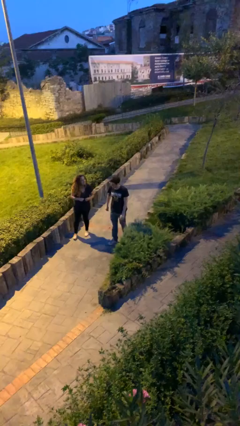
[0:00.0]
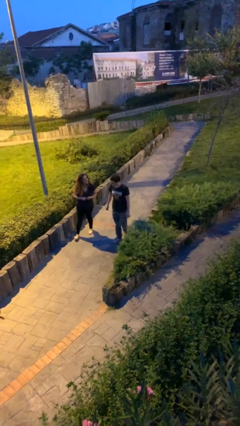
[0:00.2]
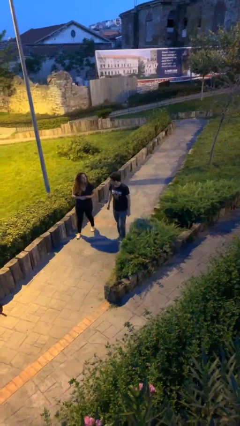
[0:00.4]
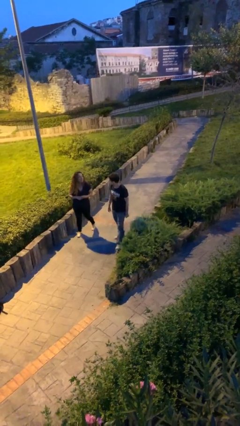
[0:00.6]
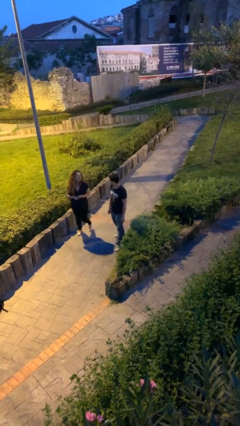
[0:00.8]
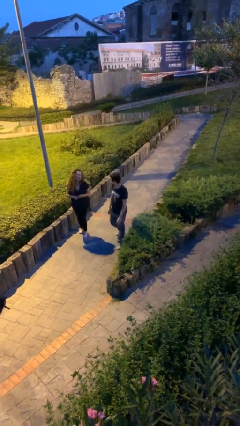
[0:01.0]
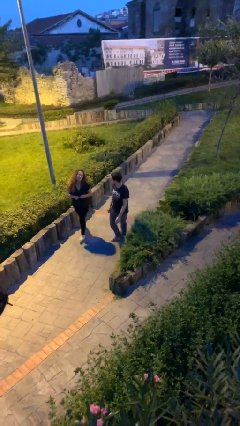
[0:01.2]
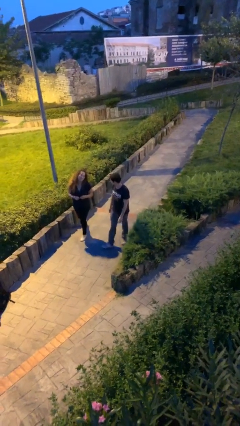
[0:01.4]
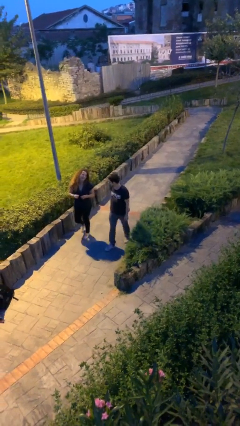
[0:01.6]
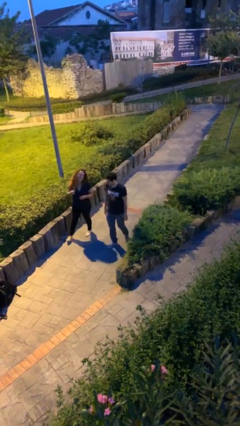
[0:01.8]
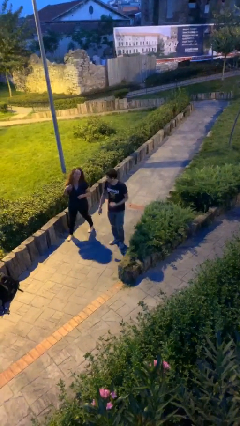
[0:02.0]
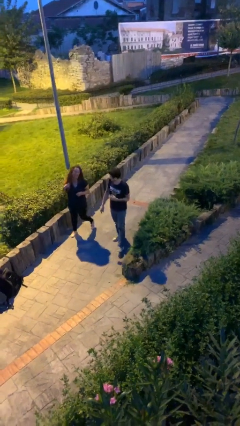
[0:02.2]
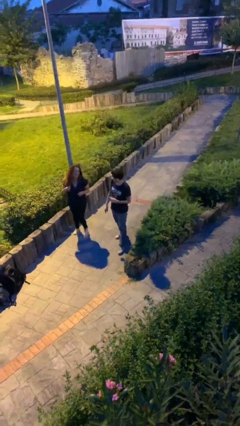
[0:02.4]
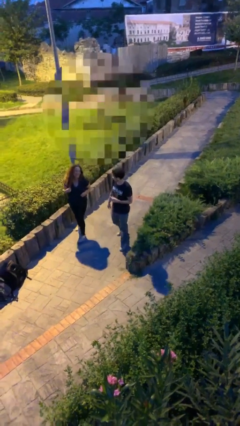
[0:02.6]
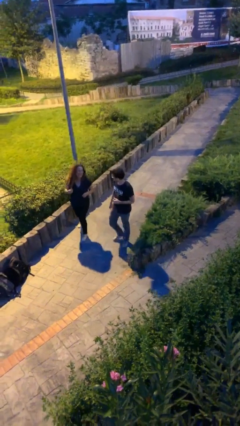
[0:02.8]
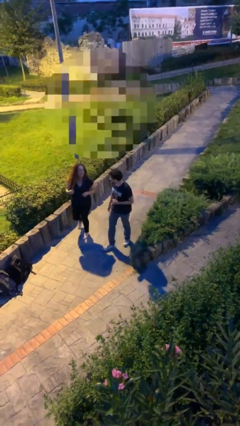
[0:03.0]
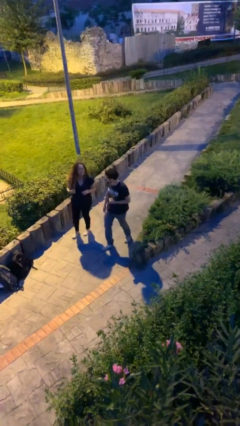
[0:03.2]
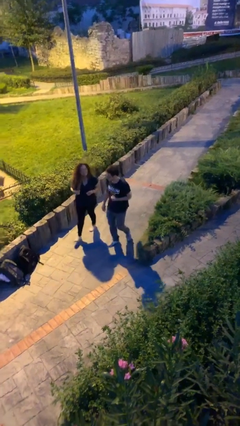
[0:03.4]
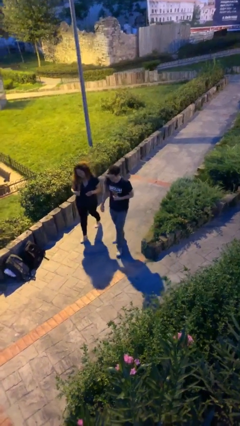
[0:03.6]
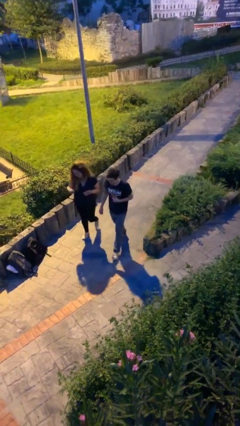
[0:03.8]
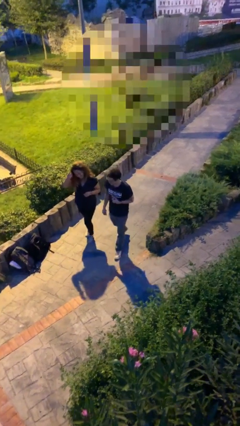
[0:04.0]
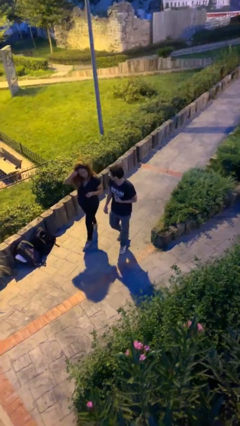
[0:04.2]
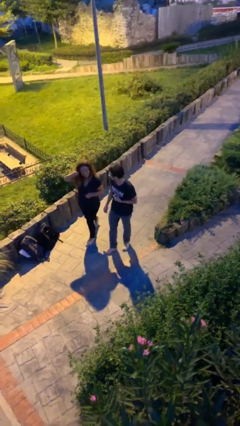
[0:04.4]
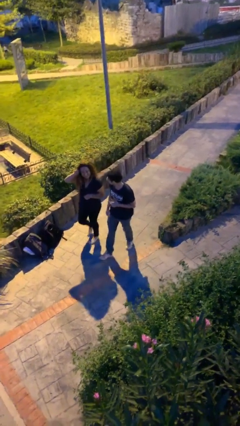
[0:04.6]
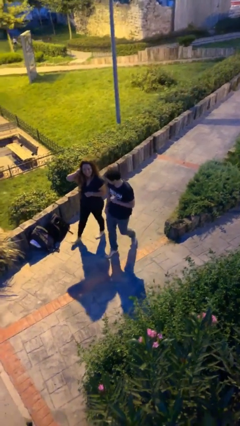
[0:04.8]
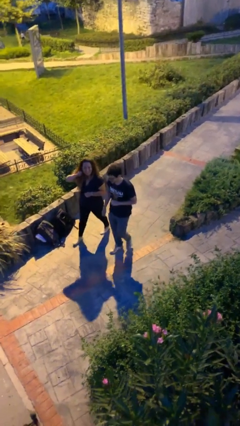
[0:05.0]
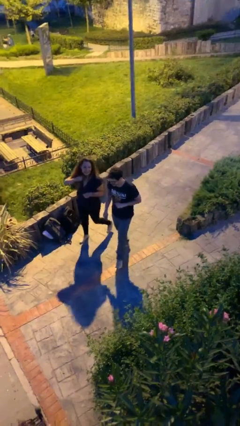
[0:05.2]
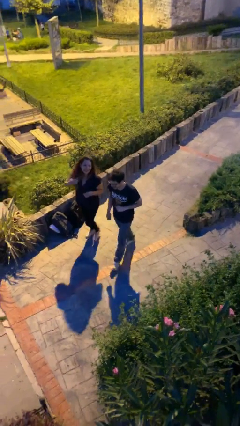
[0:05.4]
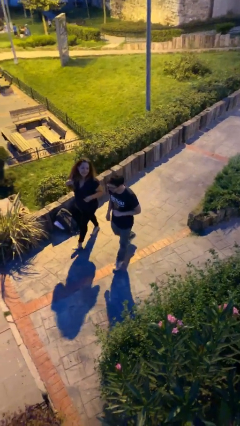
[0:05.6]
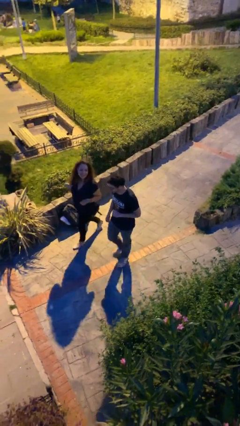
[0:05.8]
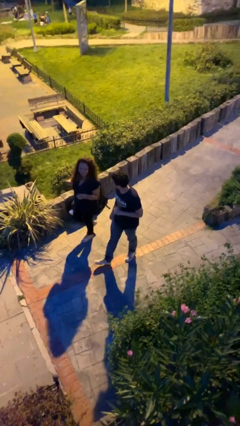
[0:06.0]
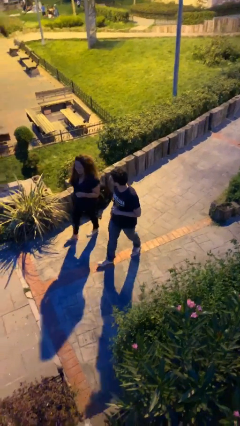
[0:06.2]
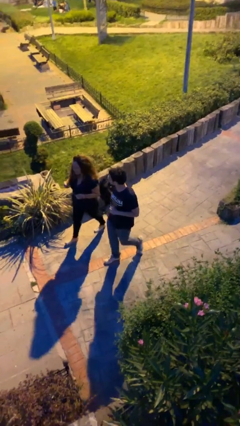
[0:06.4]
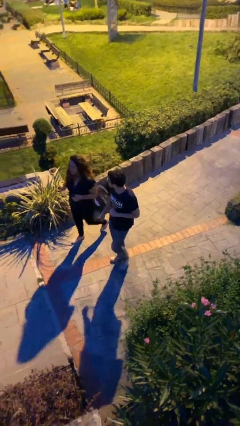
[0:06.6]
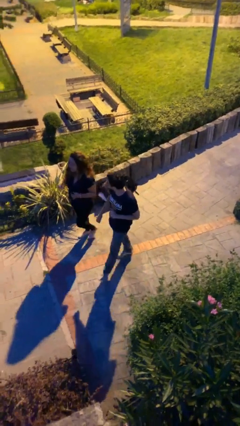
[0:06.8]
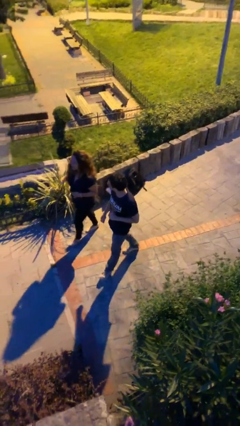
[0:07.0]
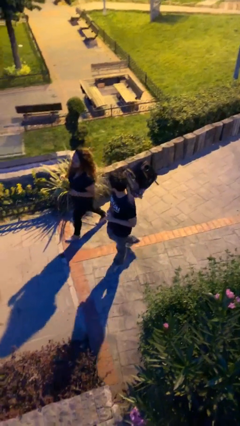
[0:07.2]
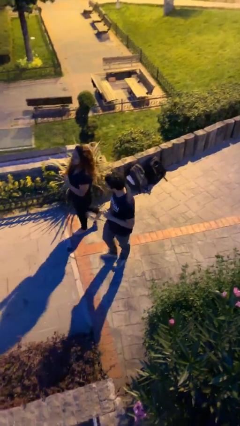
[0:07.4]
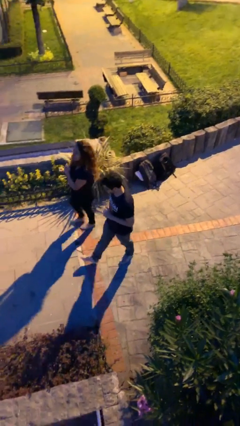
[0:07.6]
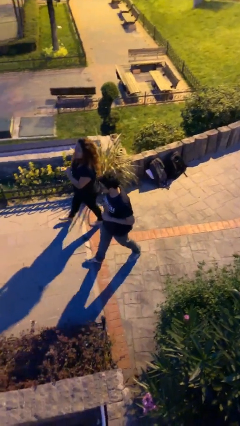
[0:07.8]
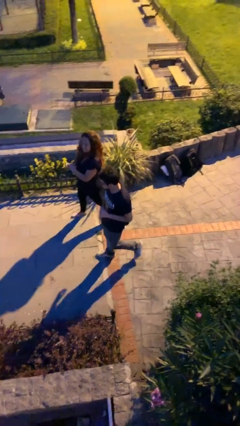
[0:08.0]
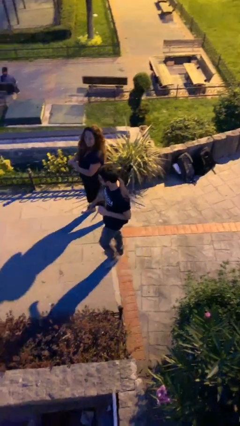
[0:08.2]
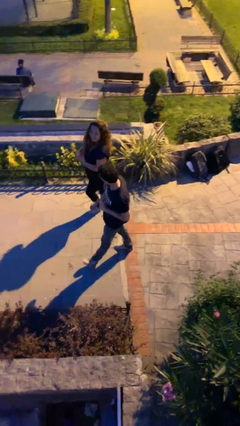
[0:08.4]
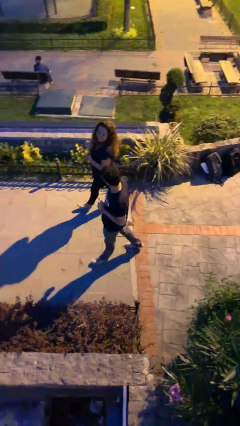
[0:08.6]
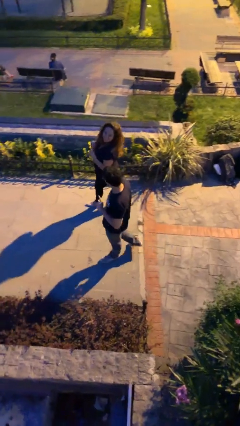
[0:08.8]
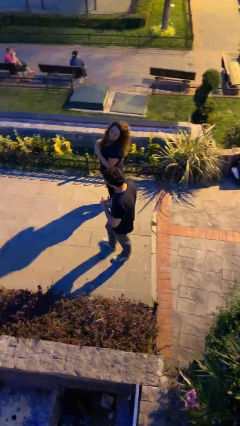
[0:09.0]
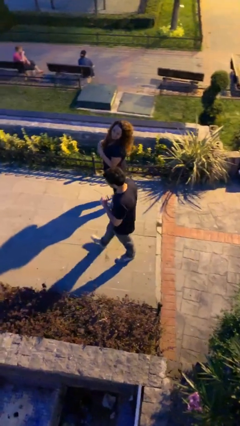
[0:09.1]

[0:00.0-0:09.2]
person talks to person

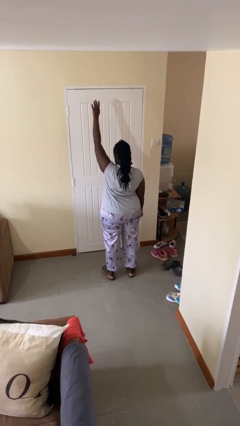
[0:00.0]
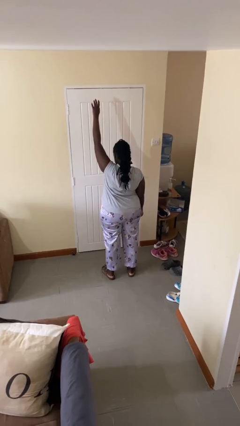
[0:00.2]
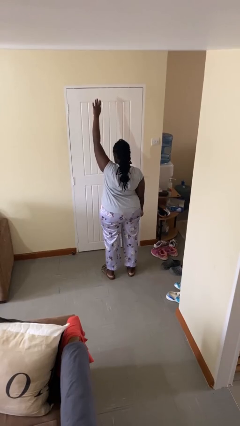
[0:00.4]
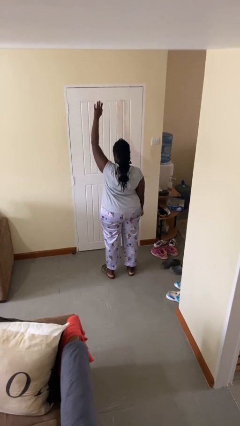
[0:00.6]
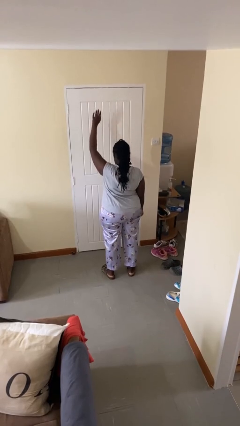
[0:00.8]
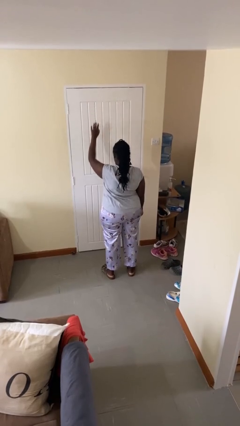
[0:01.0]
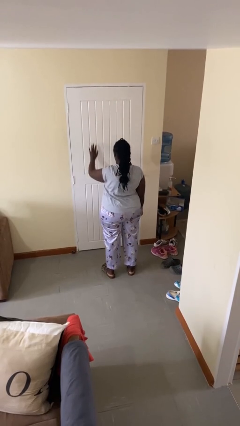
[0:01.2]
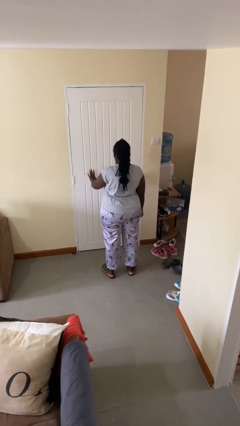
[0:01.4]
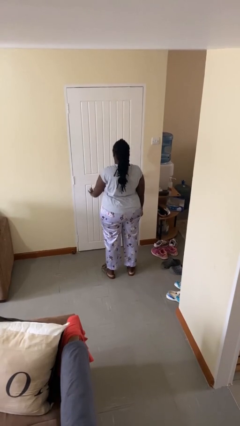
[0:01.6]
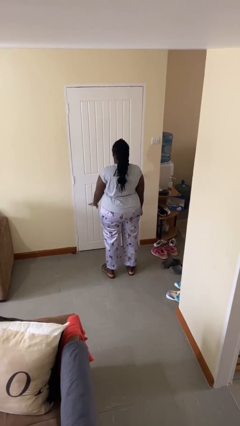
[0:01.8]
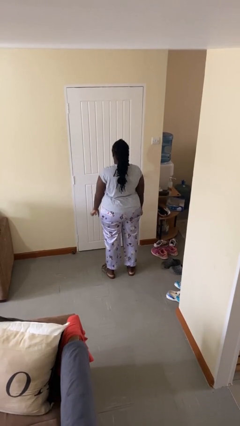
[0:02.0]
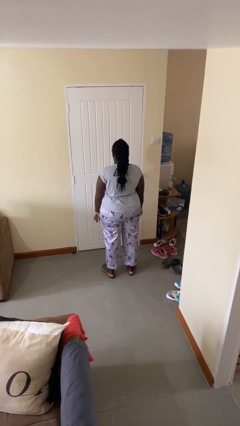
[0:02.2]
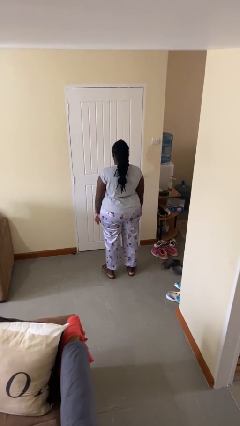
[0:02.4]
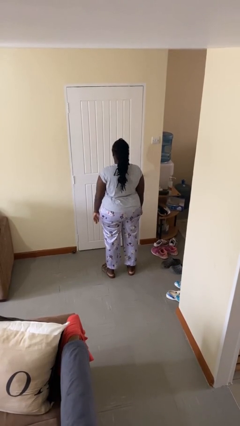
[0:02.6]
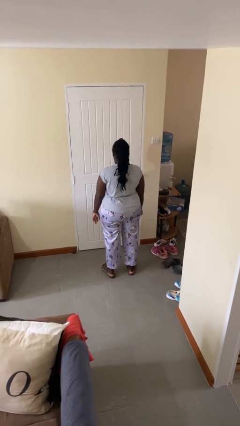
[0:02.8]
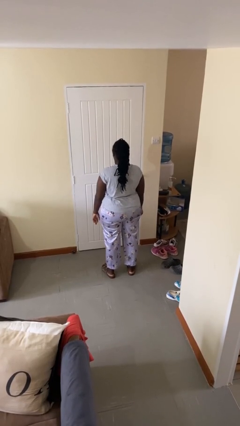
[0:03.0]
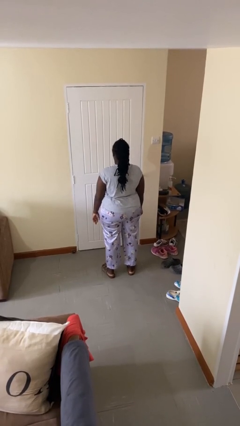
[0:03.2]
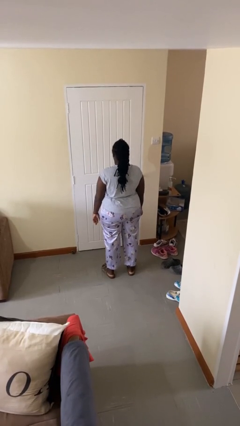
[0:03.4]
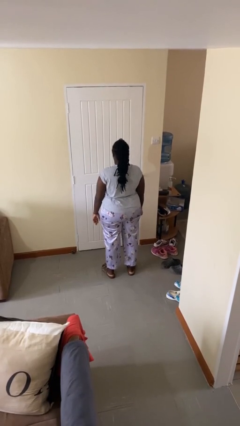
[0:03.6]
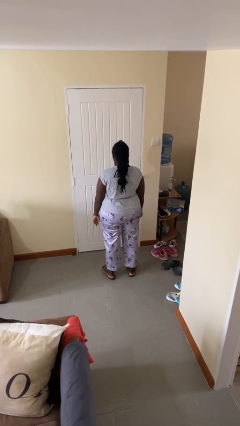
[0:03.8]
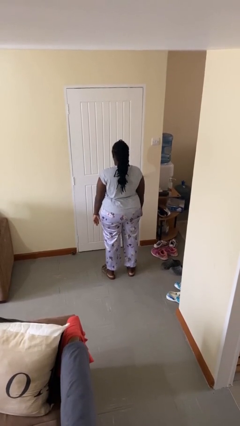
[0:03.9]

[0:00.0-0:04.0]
person gestures swipe down

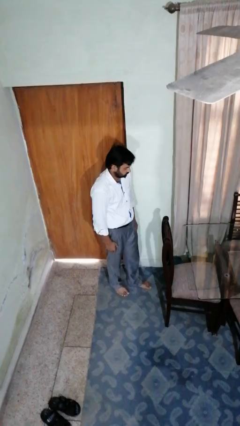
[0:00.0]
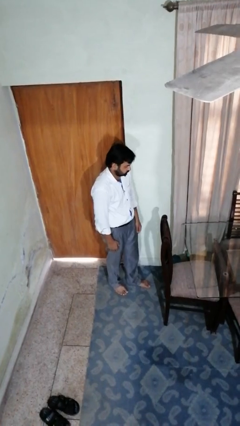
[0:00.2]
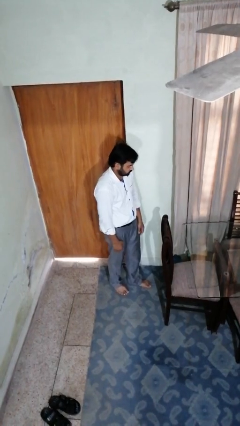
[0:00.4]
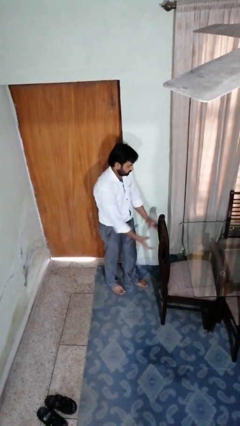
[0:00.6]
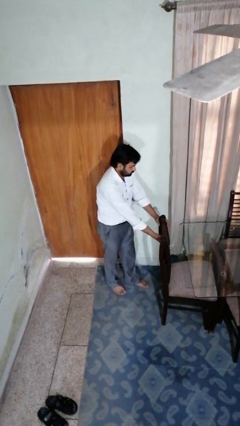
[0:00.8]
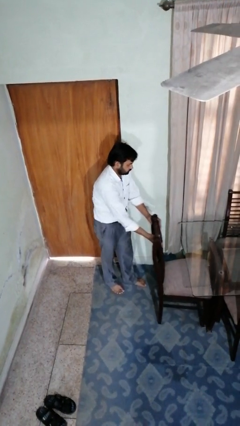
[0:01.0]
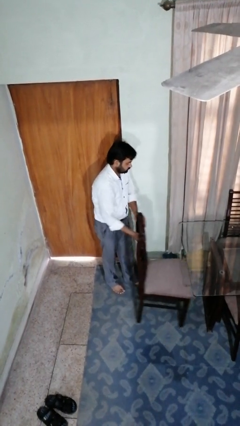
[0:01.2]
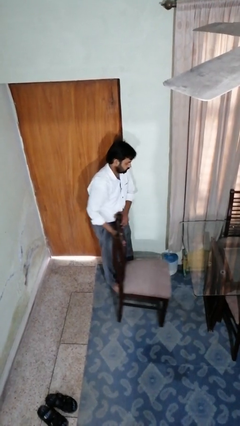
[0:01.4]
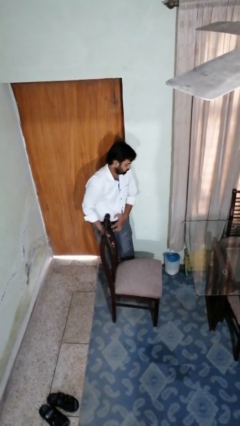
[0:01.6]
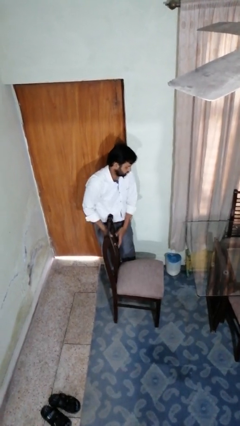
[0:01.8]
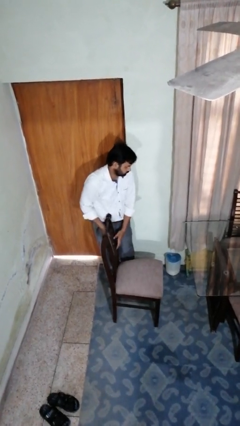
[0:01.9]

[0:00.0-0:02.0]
person pulls out chair

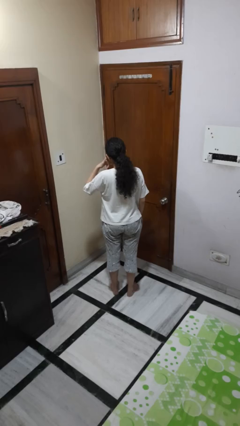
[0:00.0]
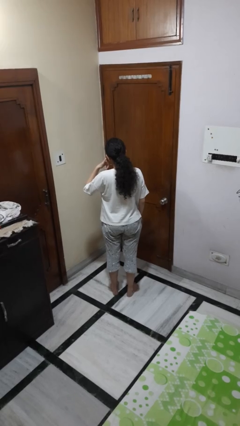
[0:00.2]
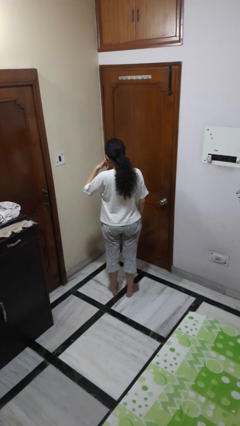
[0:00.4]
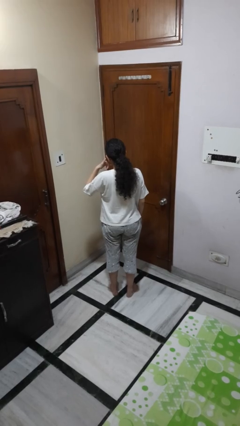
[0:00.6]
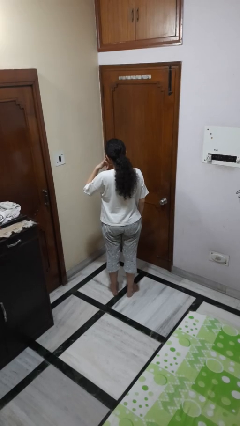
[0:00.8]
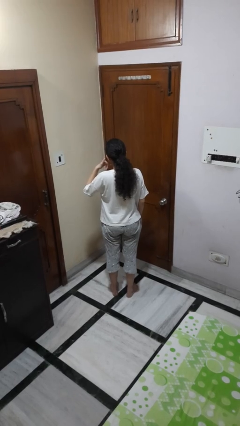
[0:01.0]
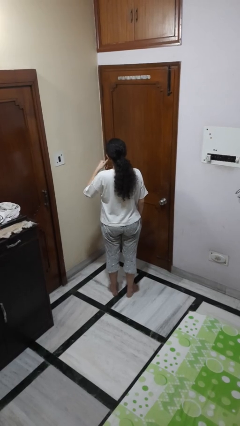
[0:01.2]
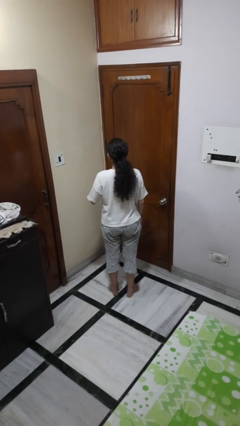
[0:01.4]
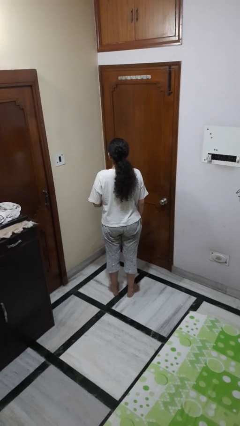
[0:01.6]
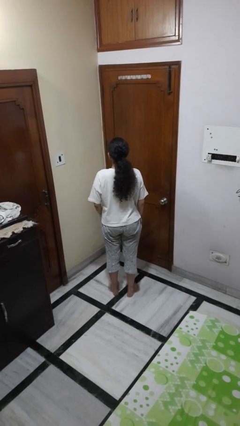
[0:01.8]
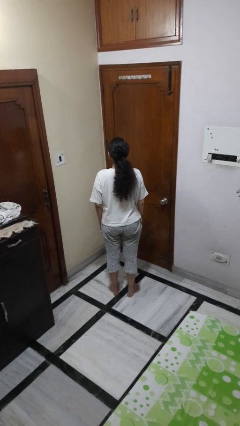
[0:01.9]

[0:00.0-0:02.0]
person gestures call me

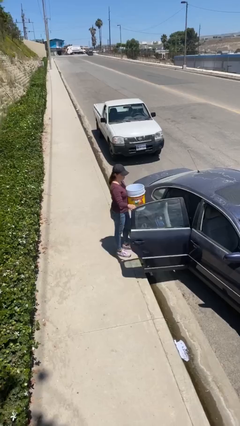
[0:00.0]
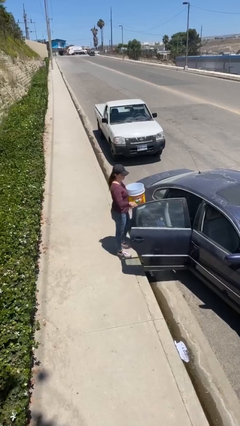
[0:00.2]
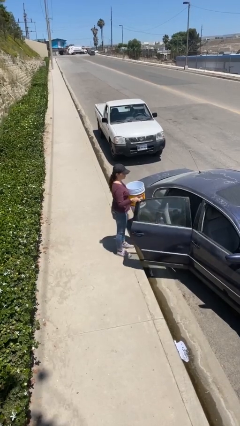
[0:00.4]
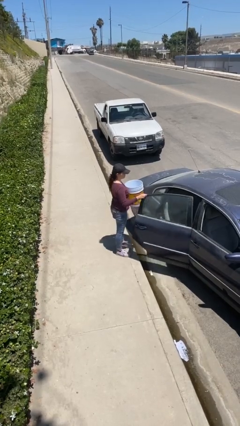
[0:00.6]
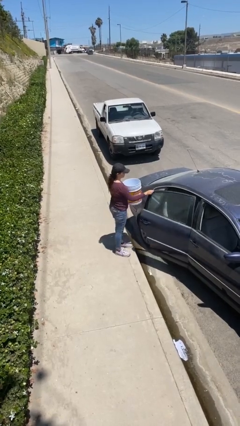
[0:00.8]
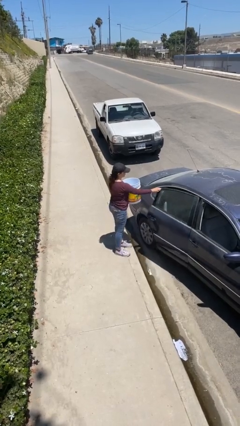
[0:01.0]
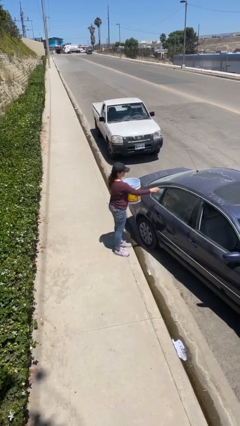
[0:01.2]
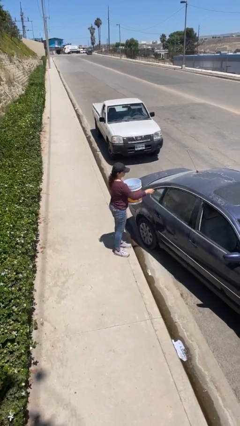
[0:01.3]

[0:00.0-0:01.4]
person closes car door
